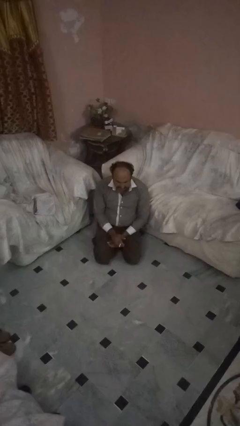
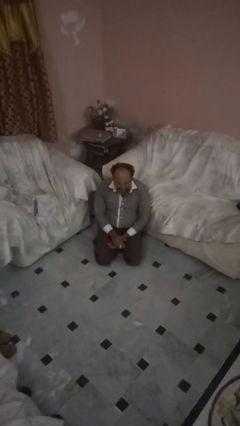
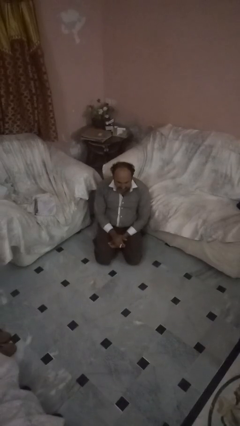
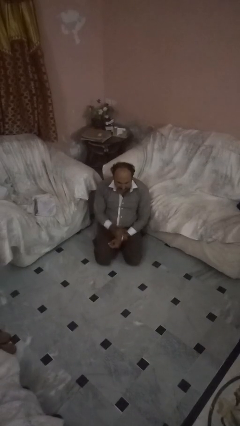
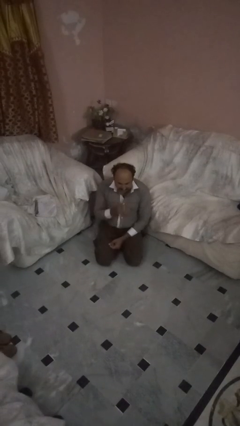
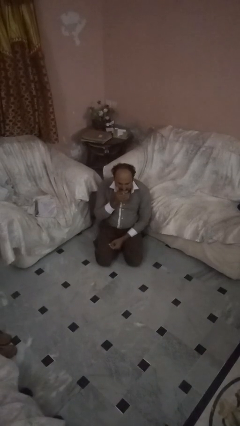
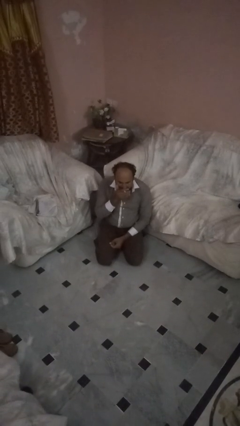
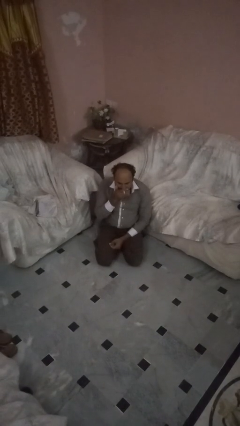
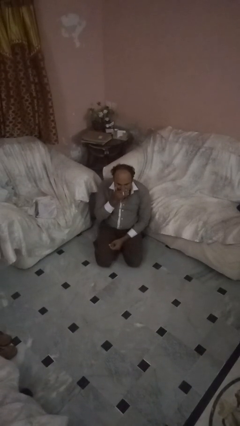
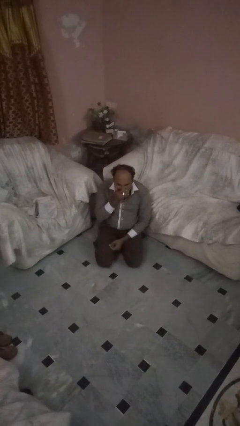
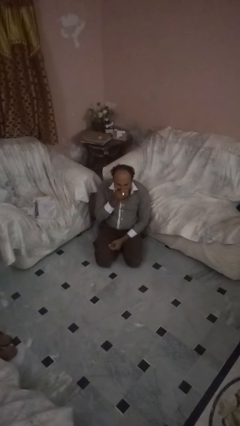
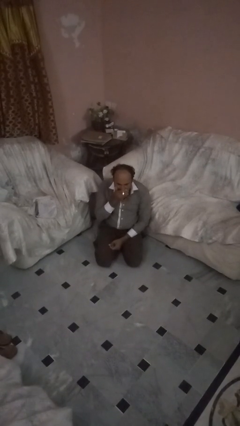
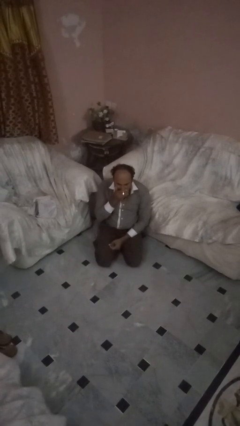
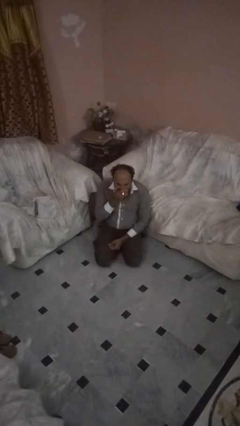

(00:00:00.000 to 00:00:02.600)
person vapes

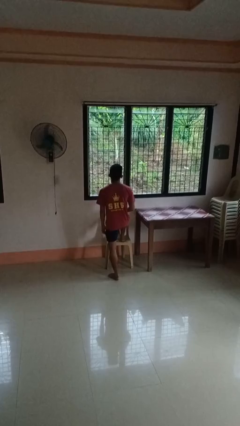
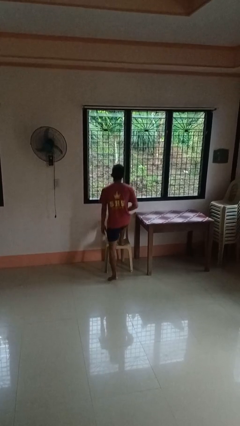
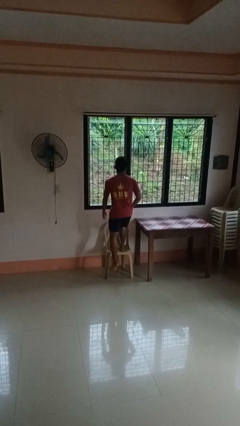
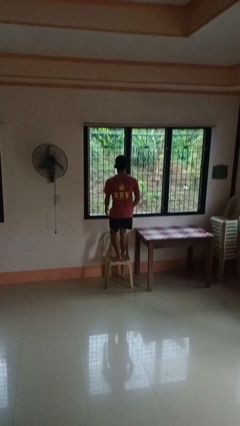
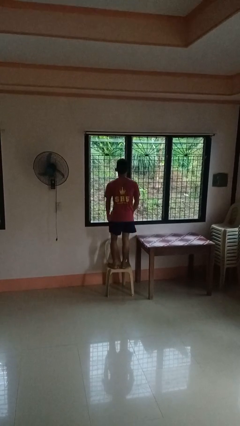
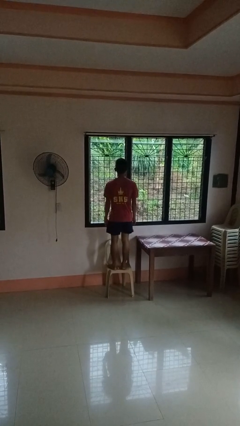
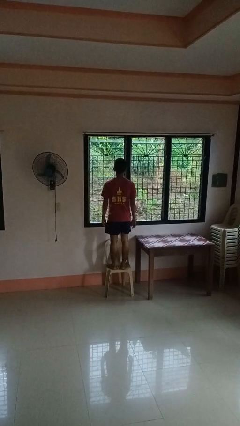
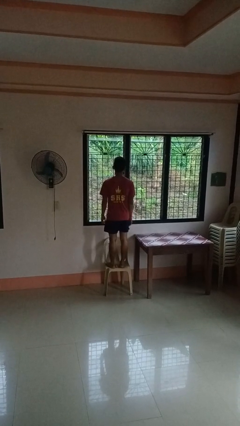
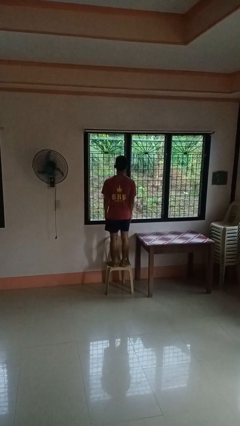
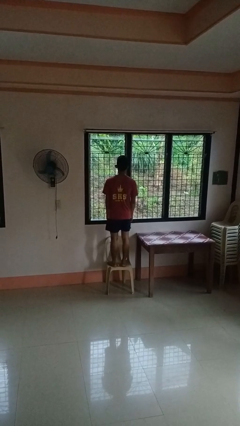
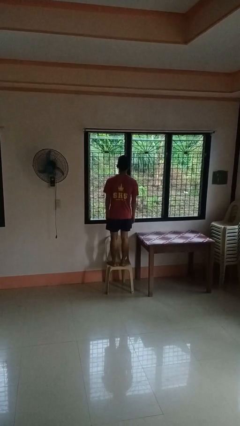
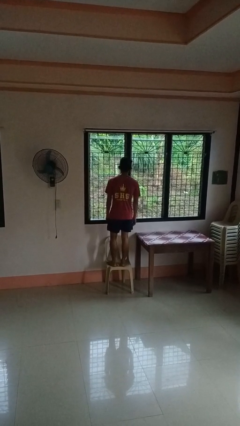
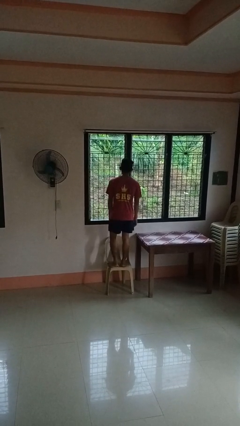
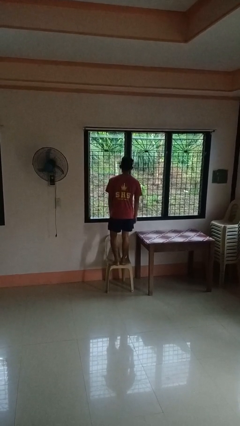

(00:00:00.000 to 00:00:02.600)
person climbs on chair

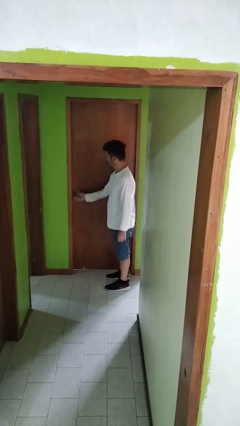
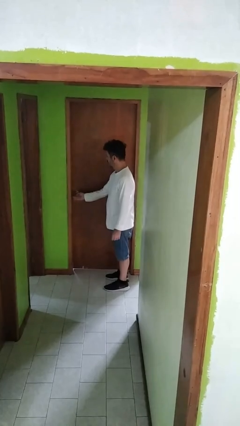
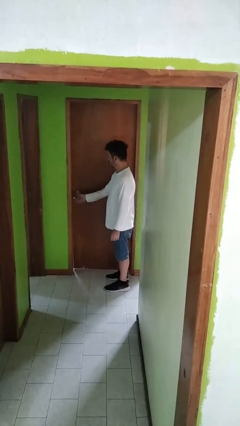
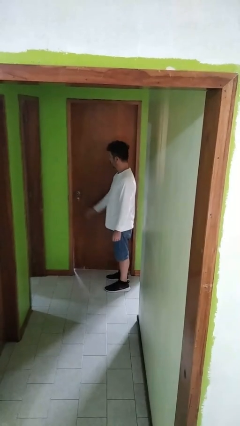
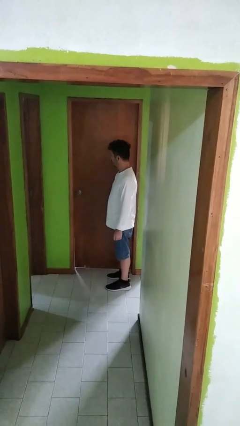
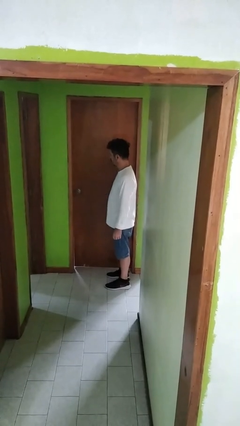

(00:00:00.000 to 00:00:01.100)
person unlocks door with keys

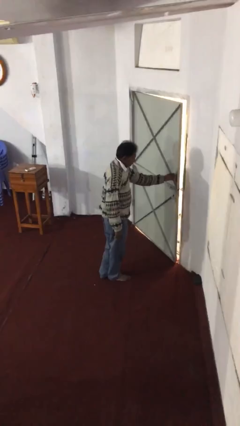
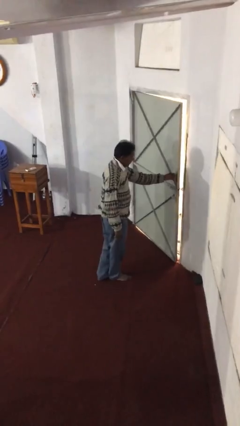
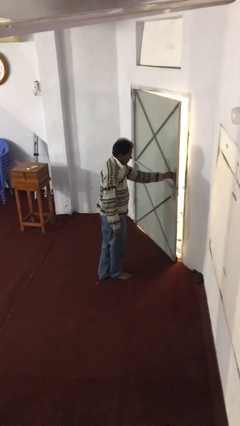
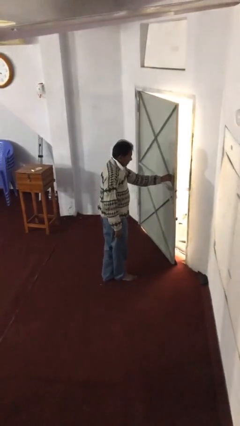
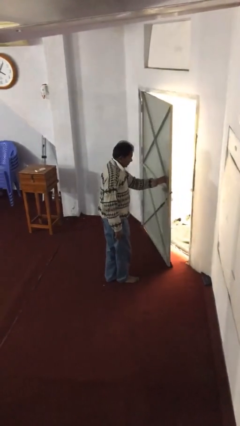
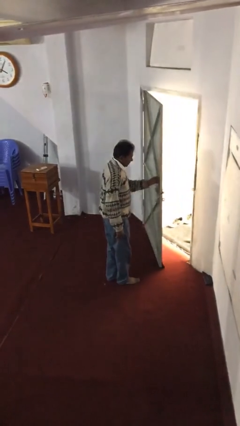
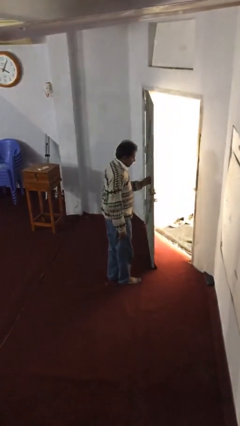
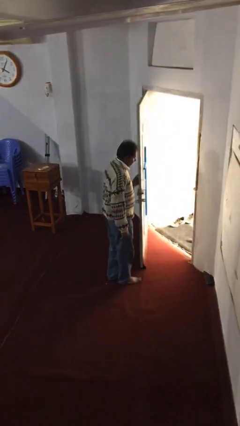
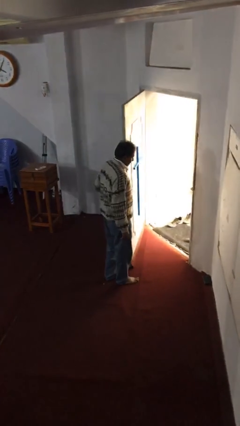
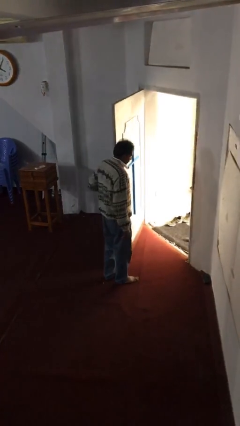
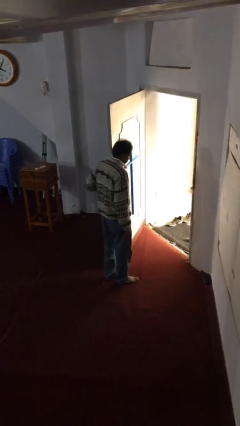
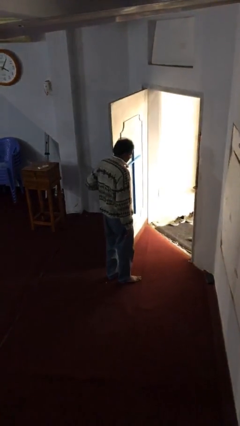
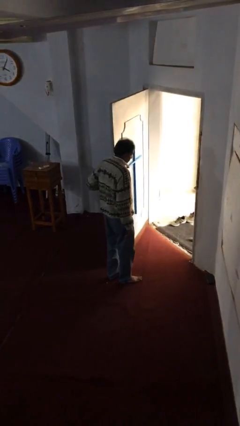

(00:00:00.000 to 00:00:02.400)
person opens facility door

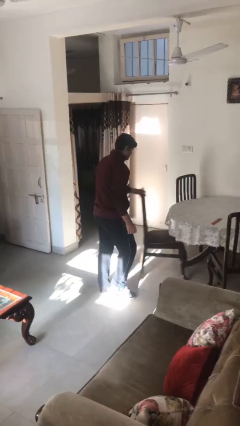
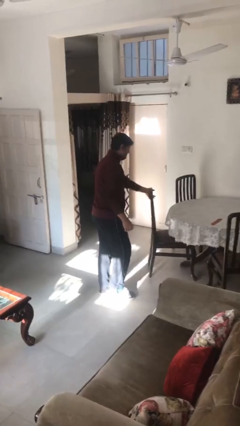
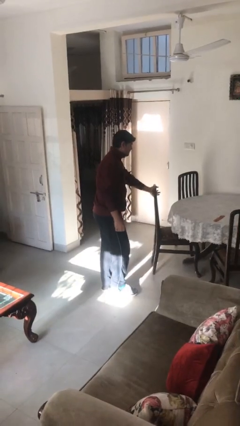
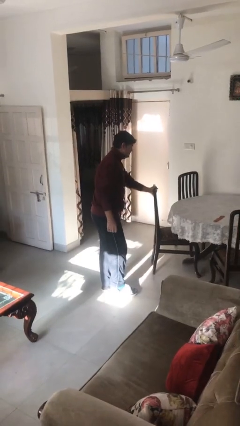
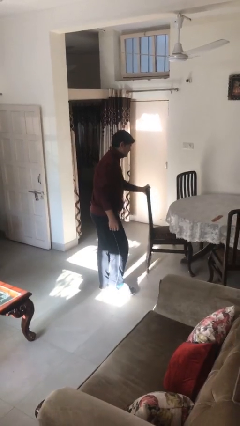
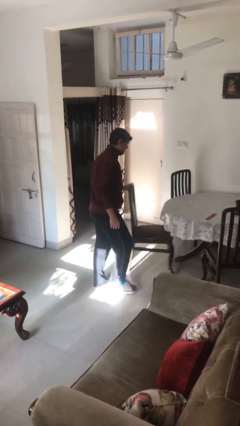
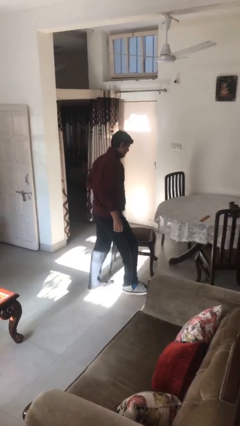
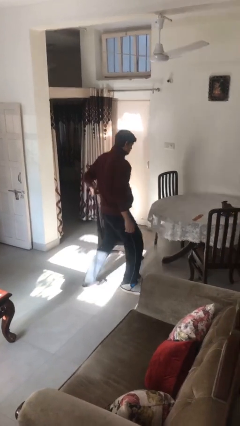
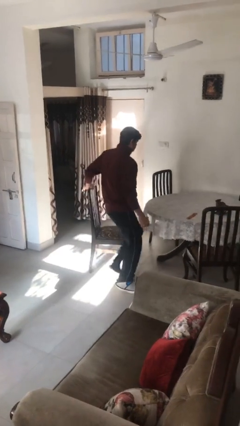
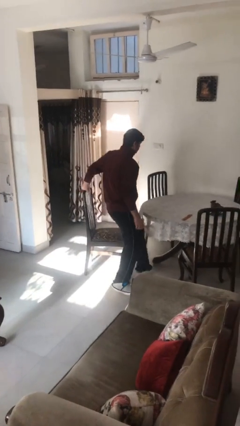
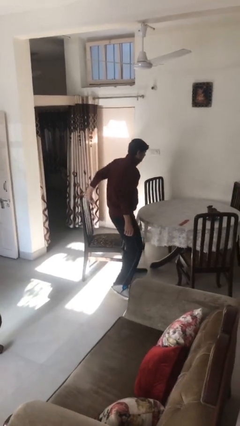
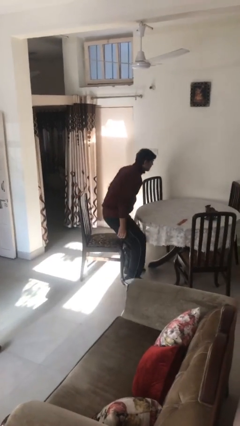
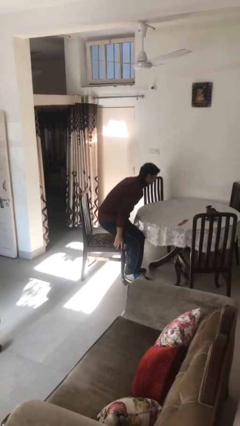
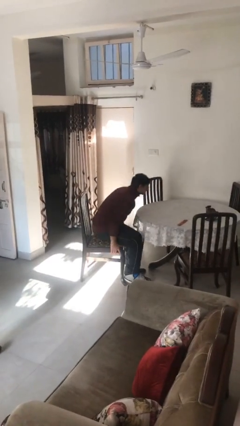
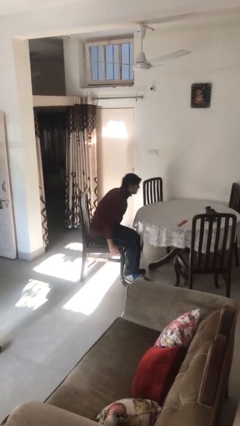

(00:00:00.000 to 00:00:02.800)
person sits down

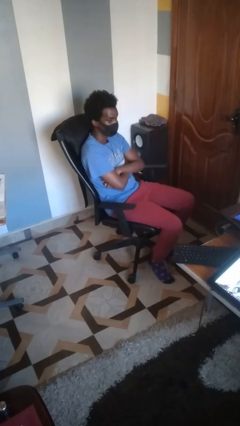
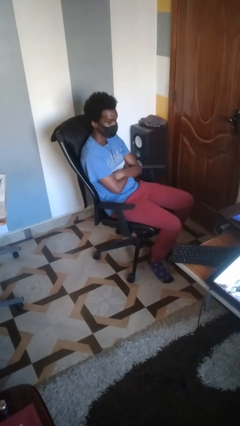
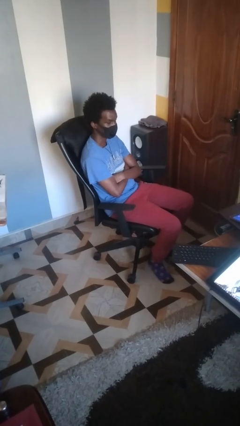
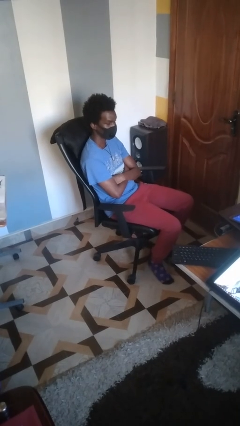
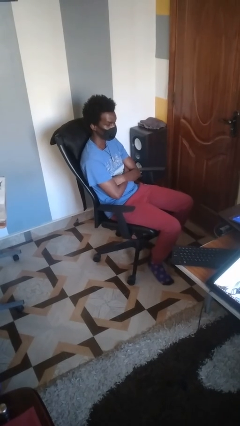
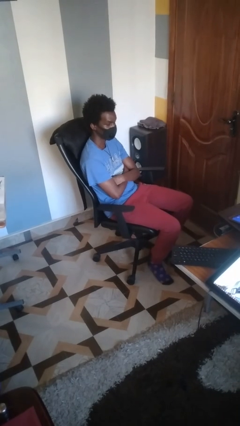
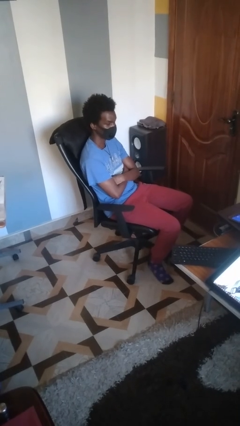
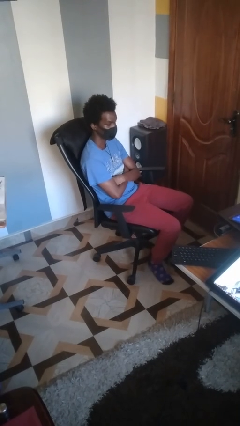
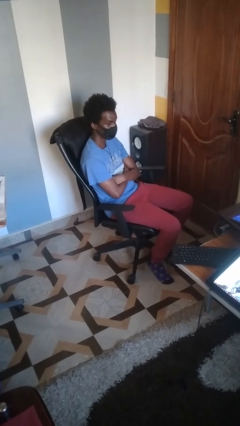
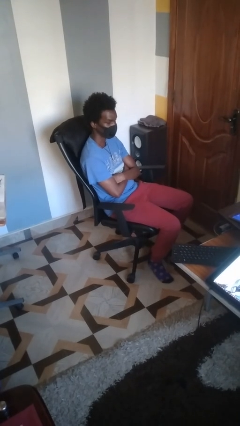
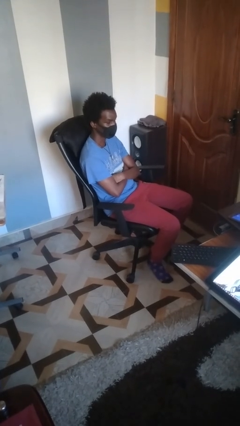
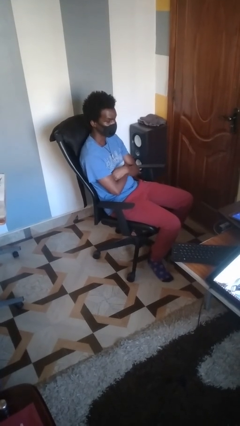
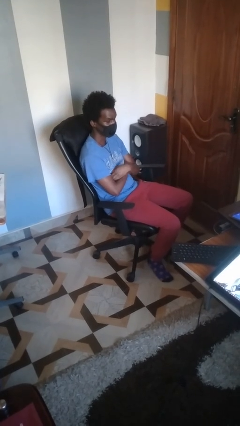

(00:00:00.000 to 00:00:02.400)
person crosses arms

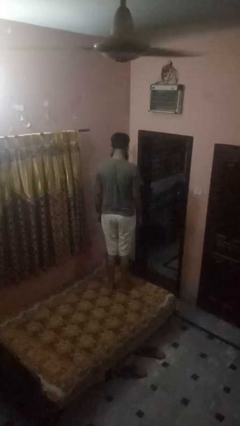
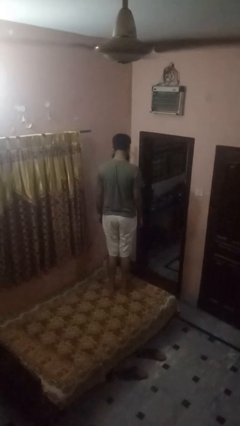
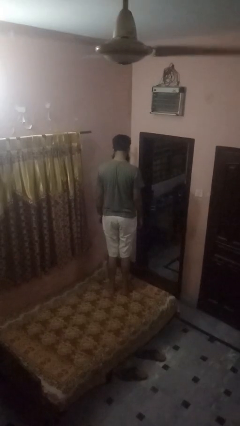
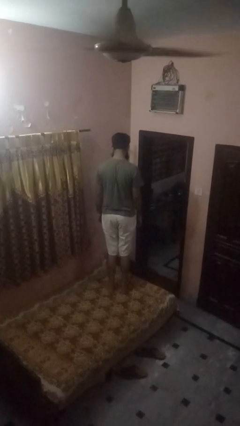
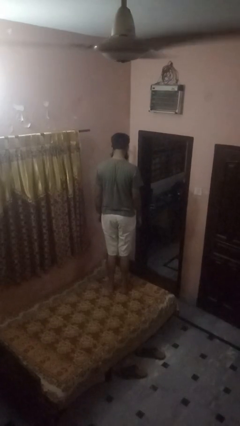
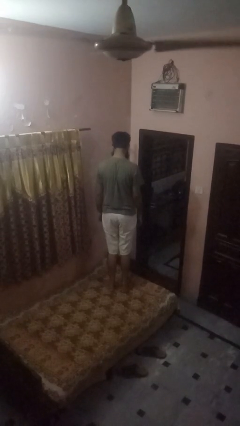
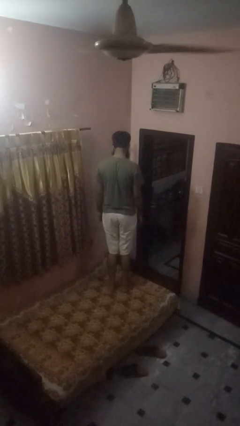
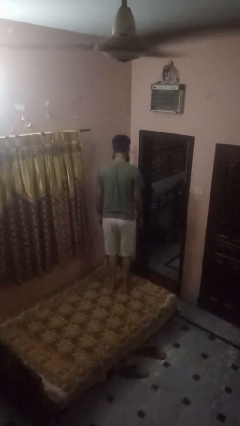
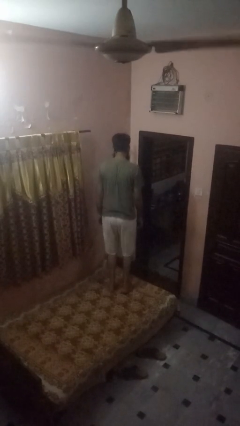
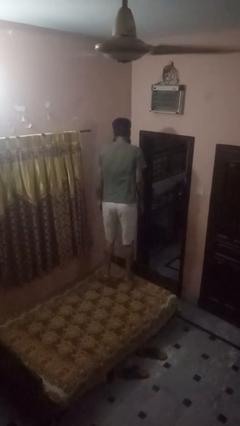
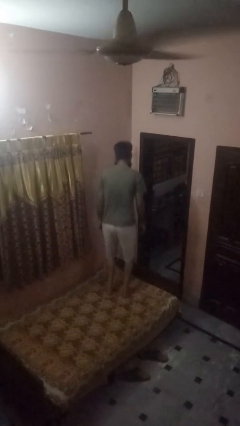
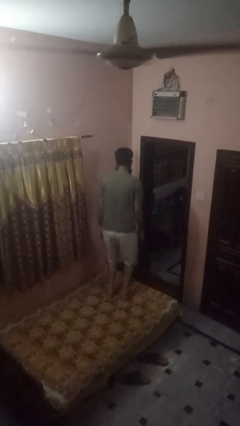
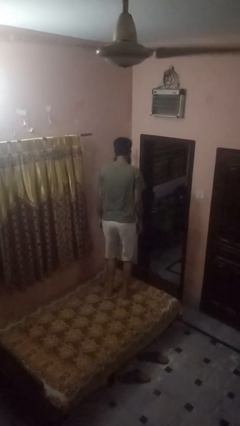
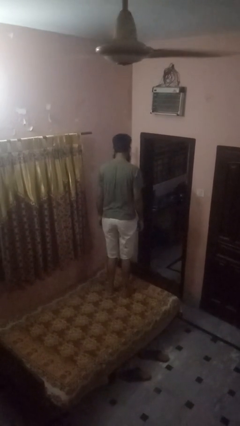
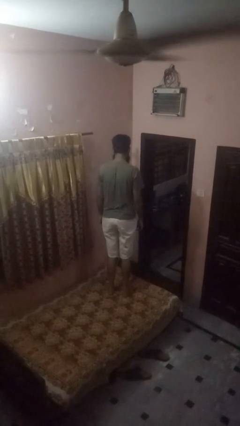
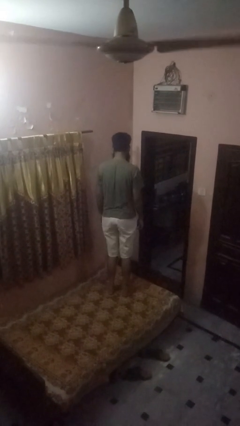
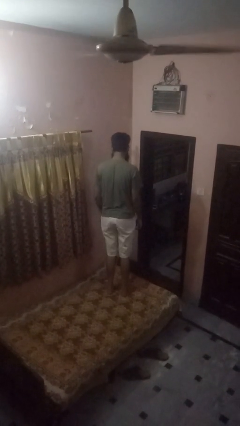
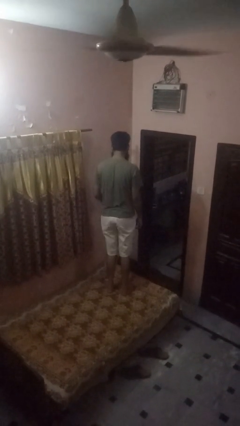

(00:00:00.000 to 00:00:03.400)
person jumps on bed

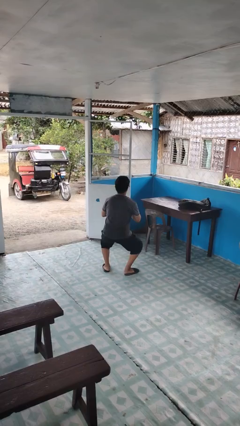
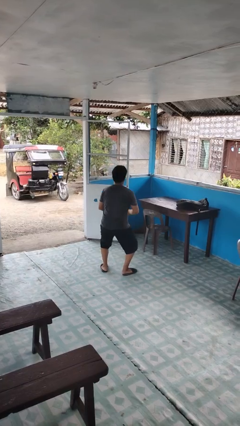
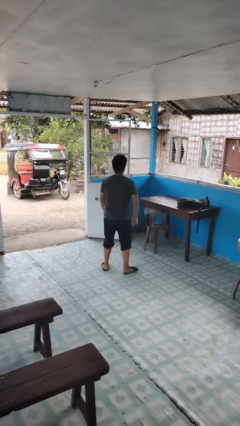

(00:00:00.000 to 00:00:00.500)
person stands up
